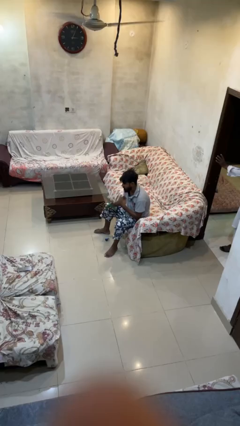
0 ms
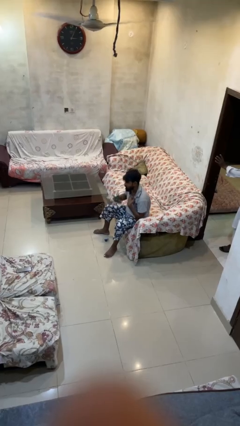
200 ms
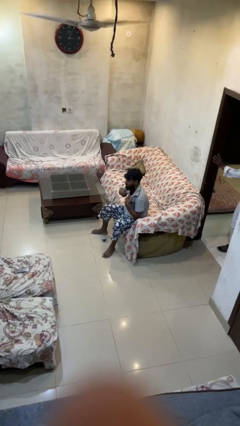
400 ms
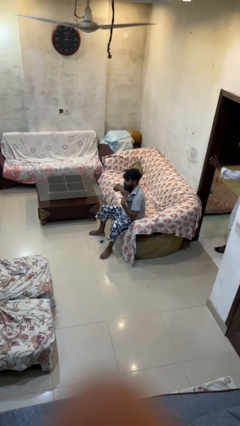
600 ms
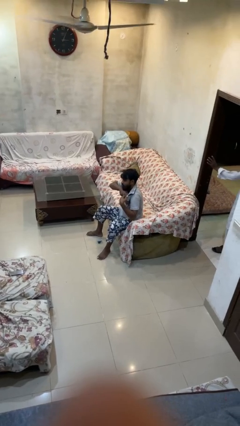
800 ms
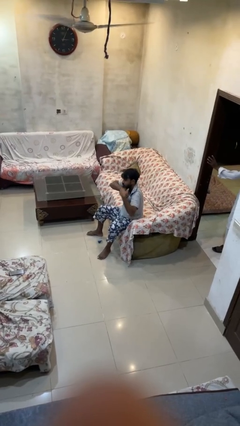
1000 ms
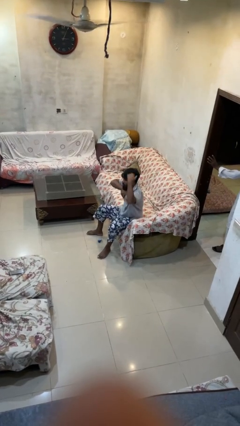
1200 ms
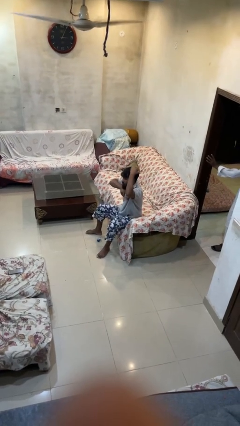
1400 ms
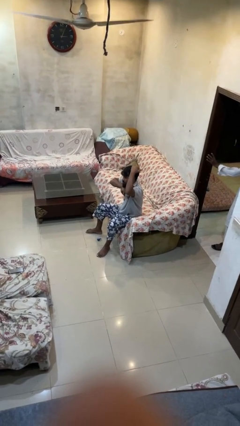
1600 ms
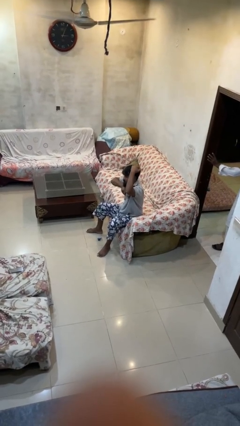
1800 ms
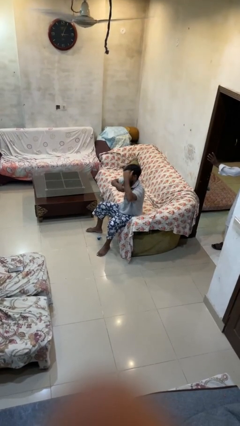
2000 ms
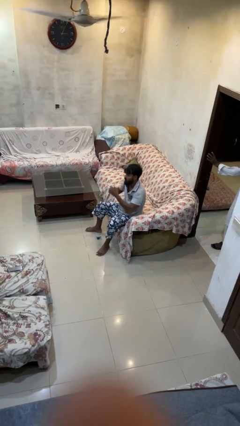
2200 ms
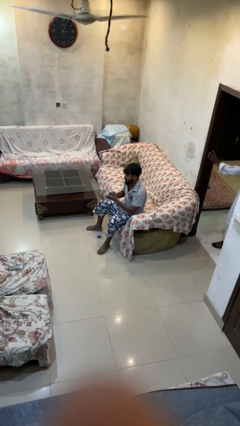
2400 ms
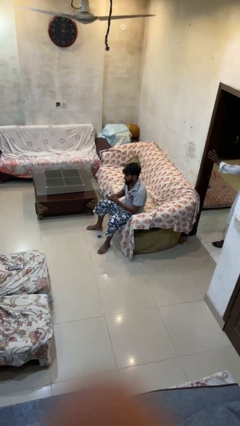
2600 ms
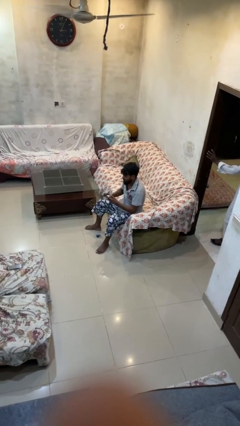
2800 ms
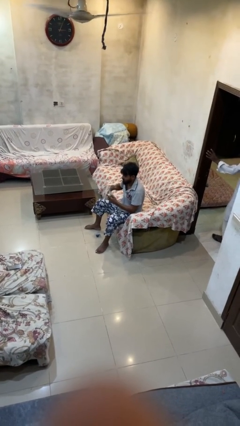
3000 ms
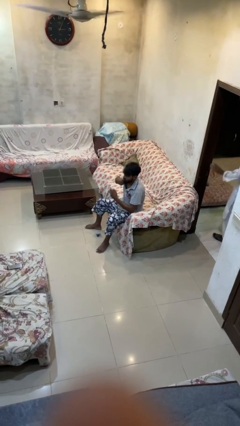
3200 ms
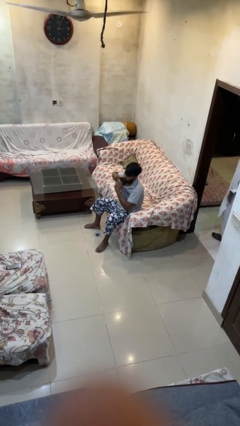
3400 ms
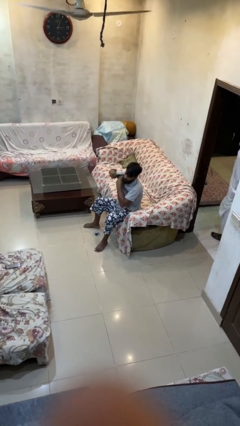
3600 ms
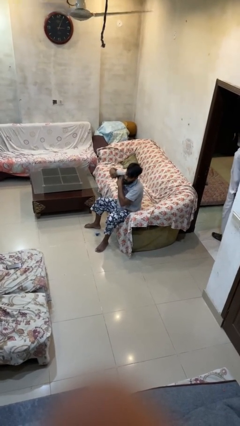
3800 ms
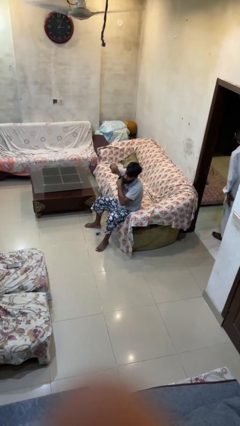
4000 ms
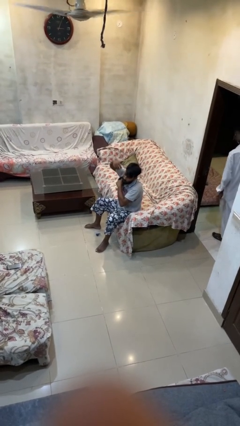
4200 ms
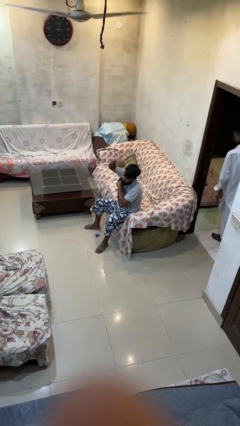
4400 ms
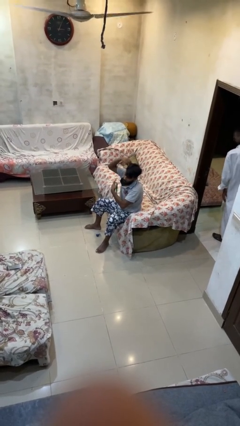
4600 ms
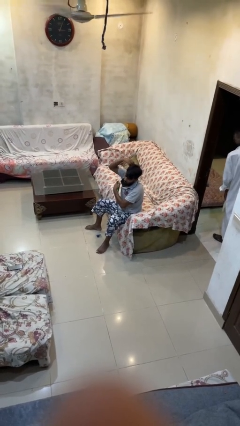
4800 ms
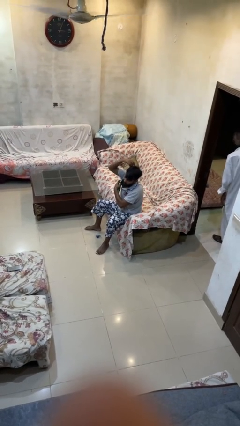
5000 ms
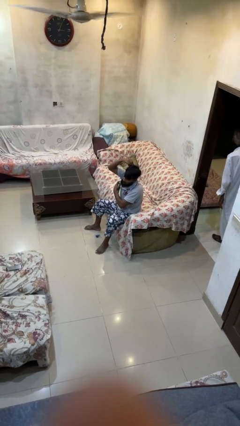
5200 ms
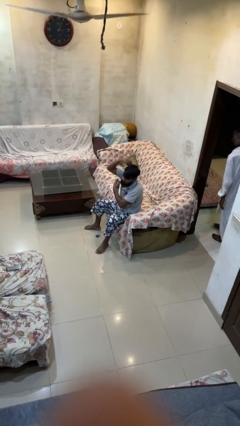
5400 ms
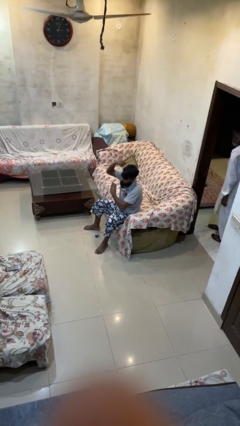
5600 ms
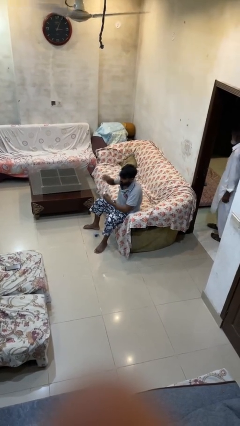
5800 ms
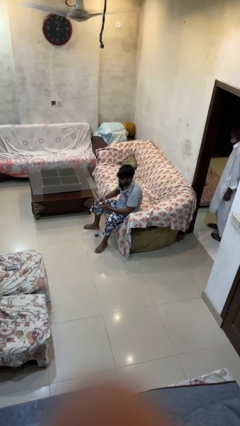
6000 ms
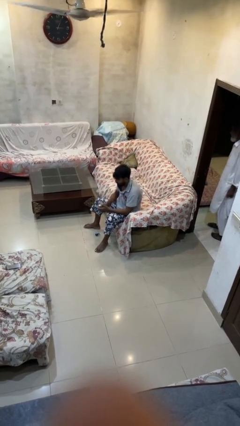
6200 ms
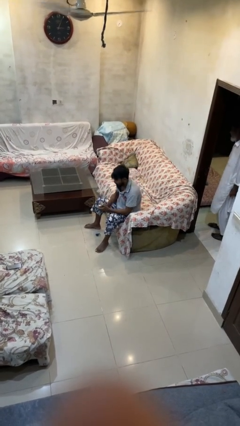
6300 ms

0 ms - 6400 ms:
person applies deodorant

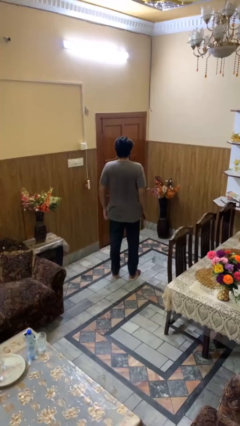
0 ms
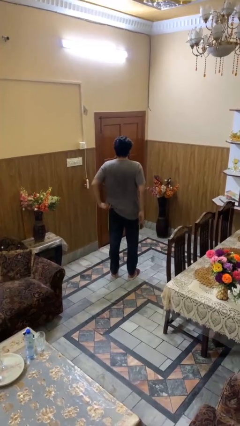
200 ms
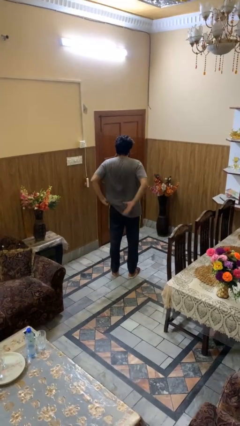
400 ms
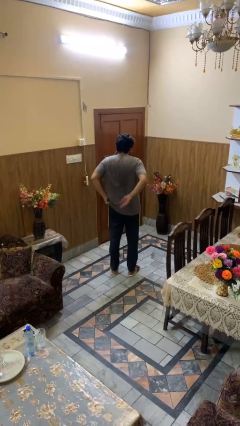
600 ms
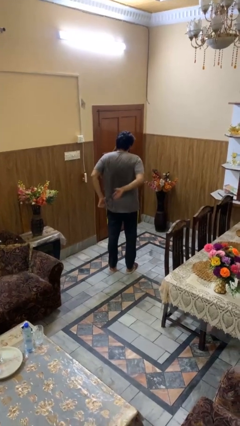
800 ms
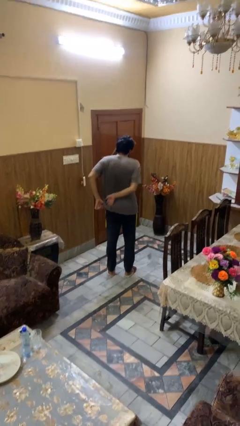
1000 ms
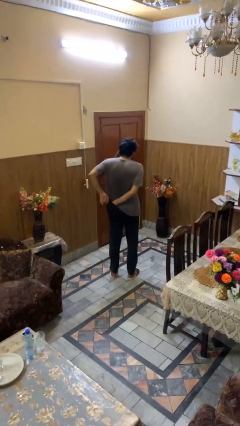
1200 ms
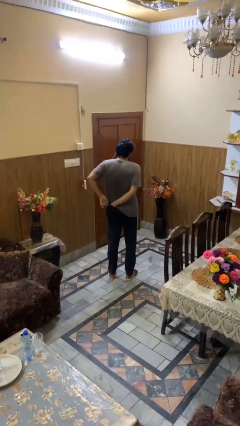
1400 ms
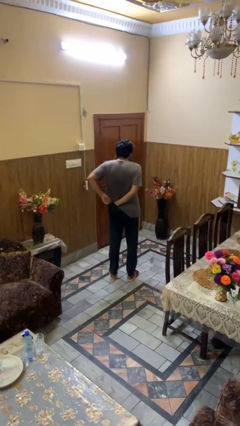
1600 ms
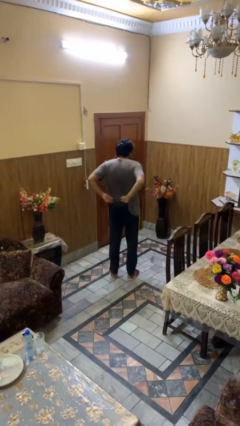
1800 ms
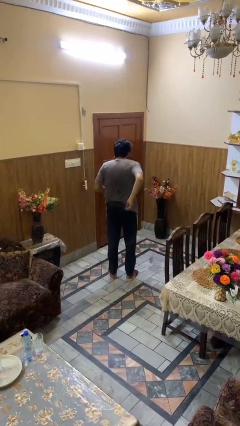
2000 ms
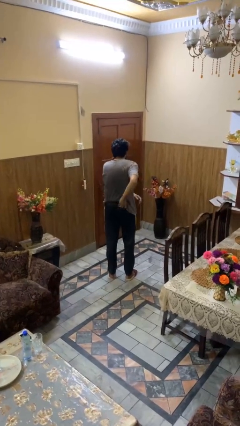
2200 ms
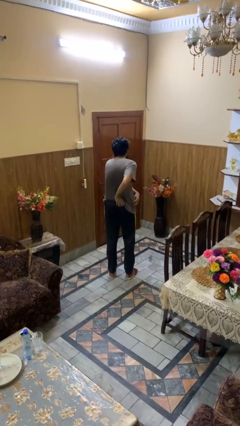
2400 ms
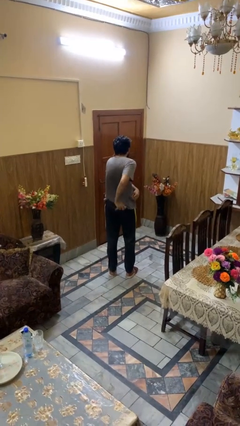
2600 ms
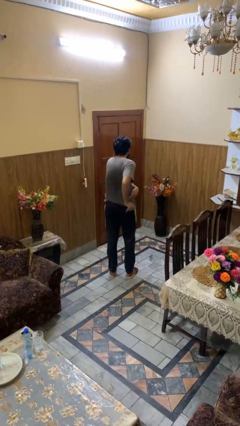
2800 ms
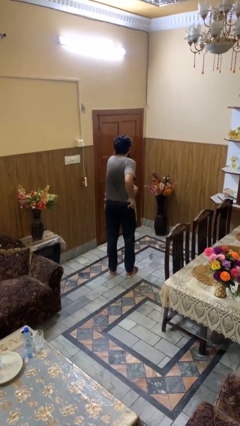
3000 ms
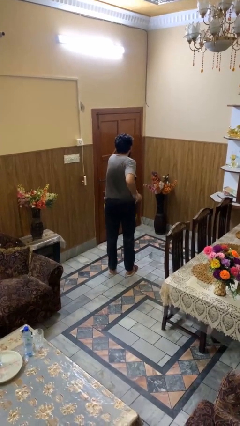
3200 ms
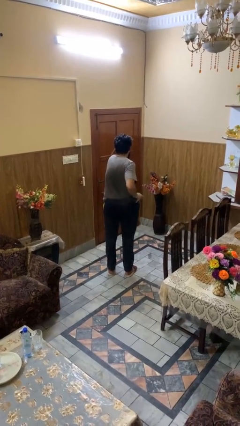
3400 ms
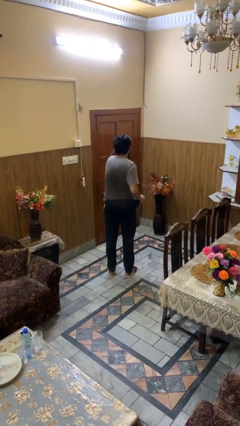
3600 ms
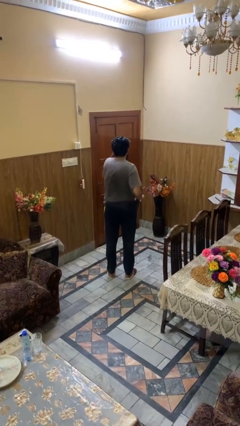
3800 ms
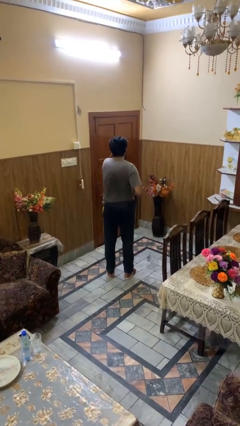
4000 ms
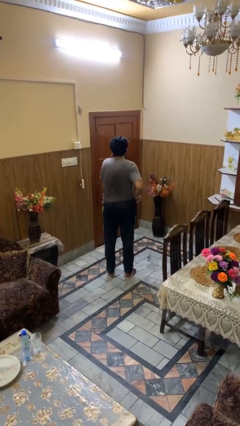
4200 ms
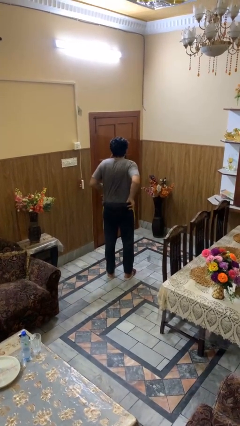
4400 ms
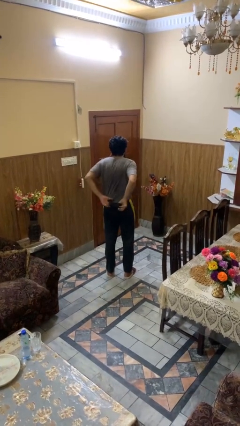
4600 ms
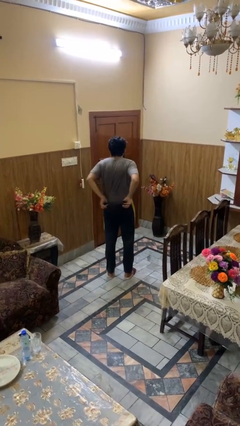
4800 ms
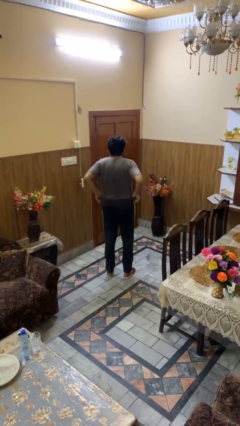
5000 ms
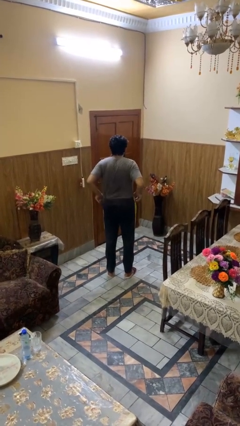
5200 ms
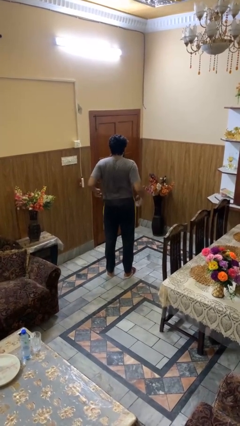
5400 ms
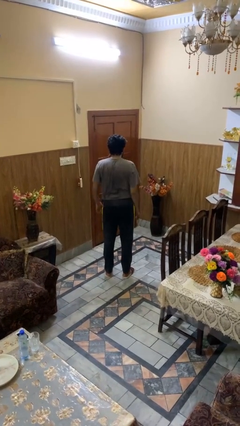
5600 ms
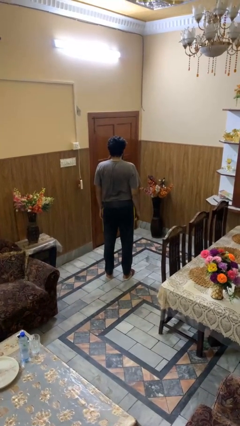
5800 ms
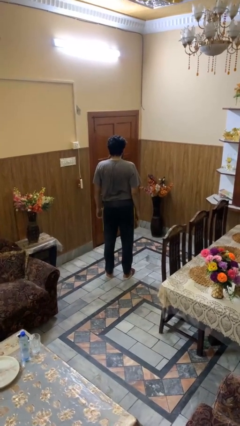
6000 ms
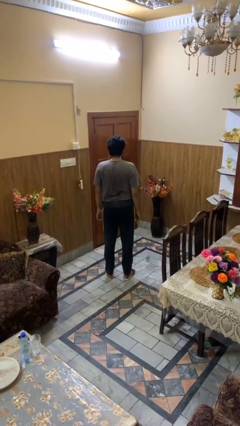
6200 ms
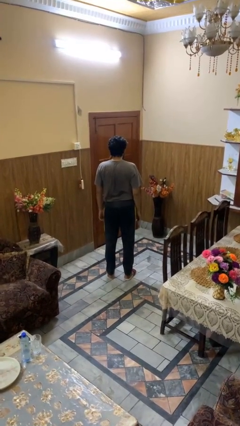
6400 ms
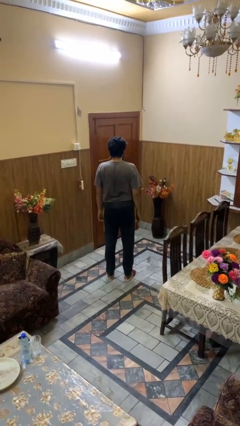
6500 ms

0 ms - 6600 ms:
person tucks in shirt

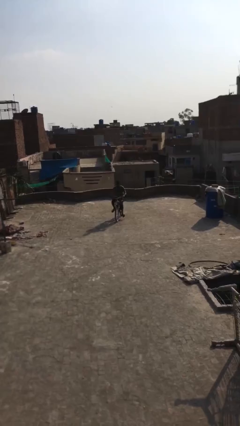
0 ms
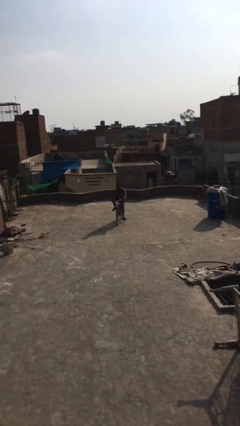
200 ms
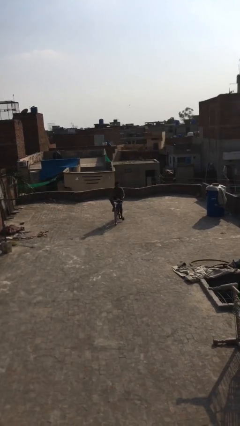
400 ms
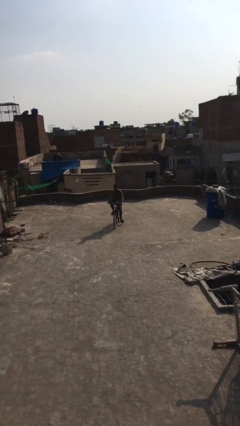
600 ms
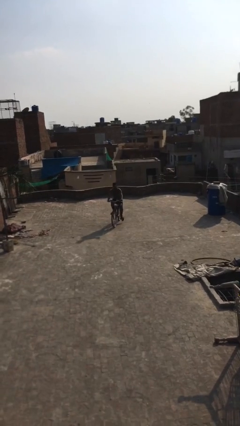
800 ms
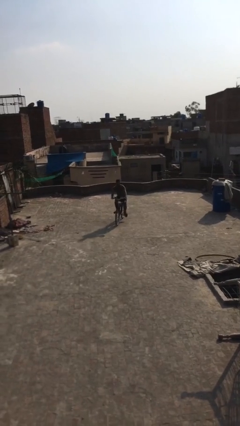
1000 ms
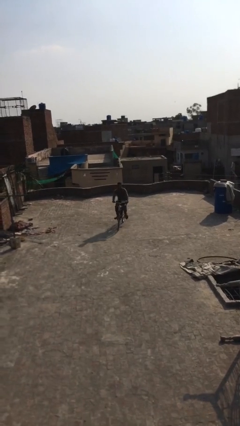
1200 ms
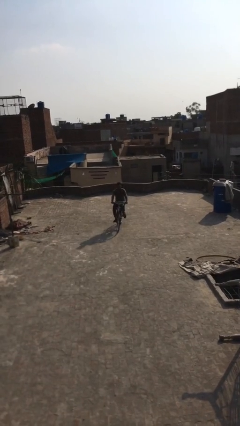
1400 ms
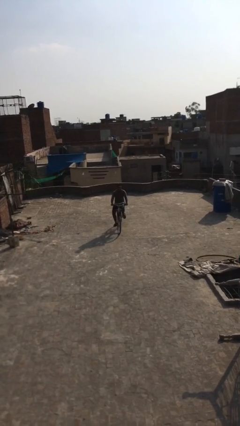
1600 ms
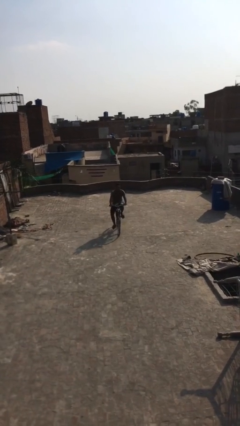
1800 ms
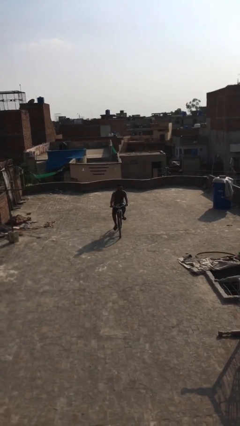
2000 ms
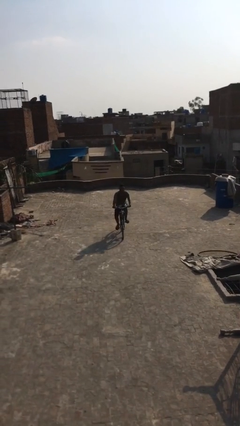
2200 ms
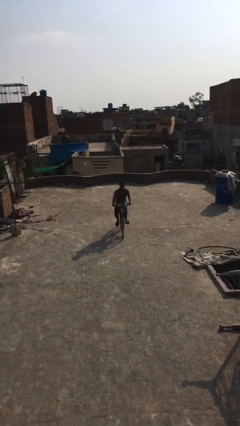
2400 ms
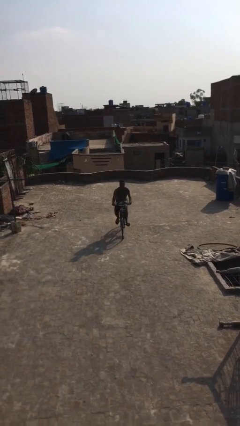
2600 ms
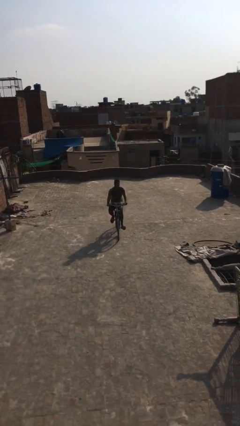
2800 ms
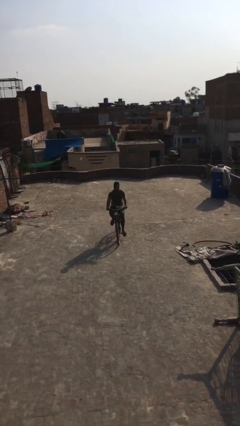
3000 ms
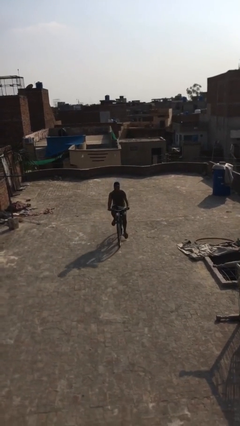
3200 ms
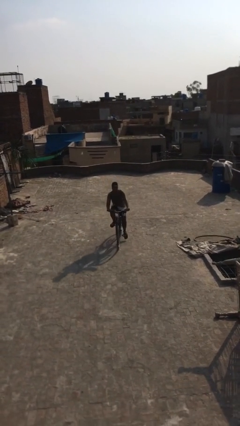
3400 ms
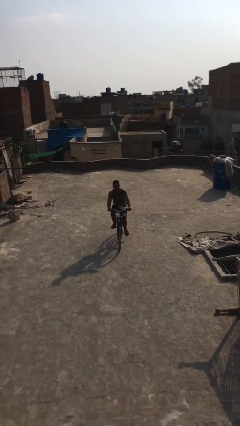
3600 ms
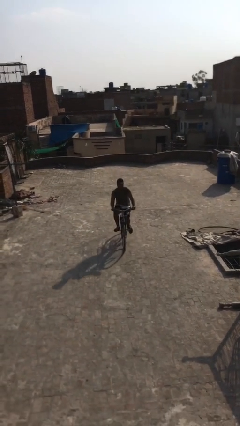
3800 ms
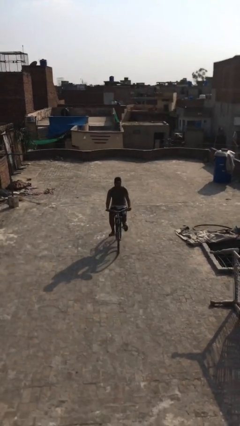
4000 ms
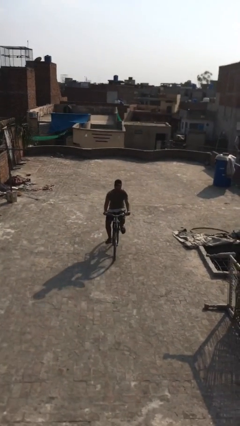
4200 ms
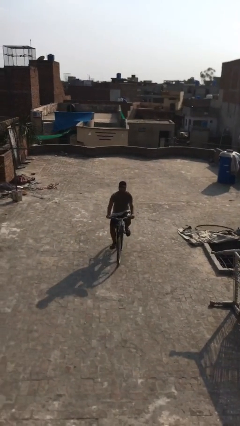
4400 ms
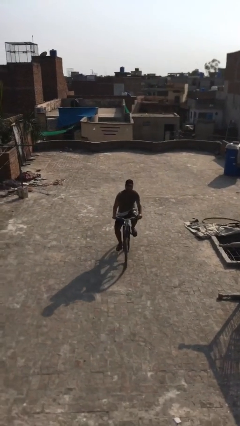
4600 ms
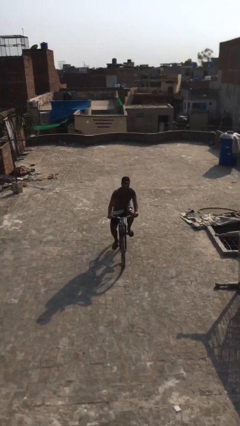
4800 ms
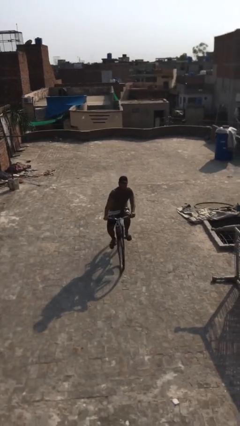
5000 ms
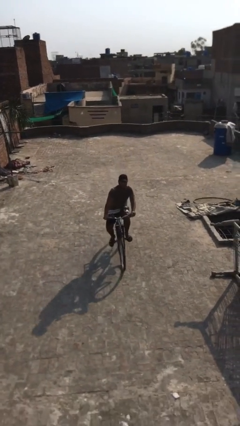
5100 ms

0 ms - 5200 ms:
person rides bicycle
